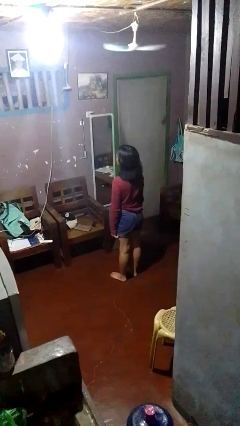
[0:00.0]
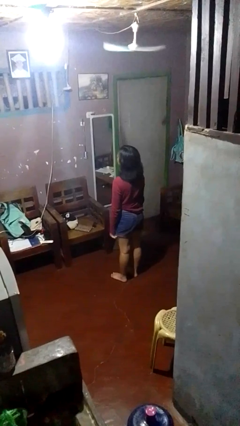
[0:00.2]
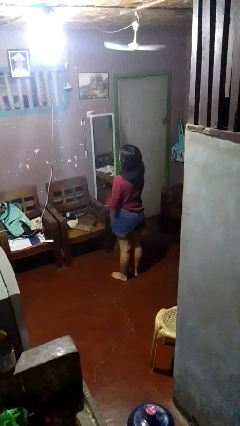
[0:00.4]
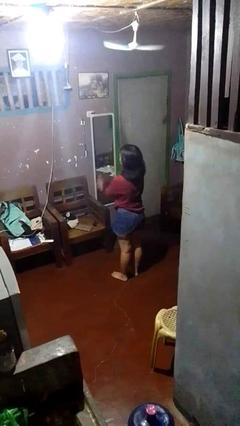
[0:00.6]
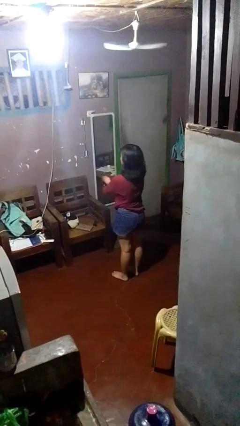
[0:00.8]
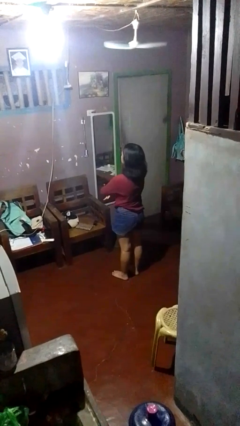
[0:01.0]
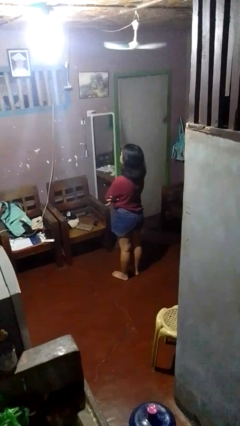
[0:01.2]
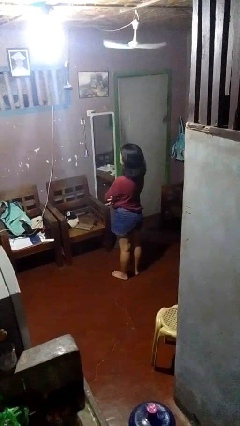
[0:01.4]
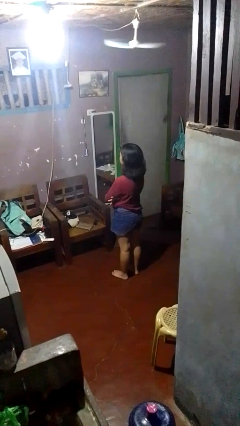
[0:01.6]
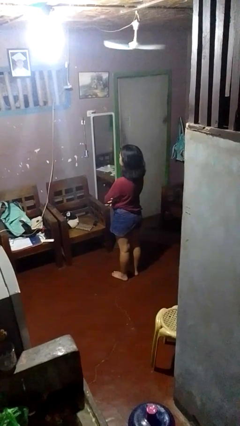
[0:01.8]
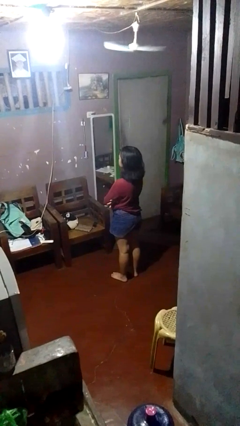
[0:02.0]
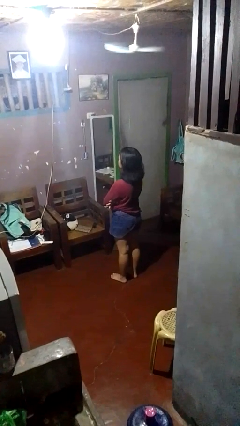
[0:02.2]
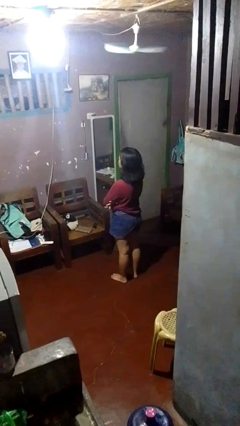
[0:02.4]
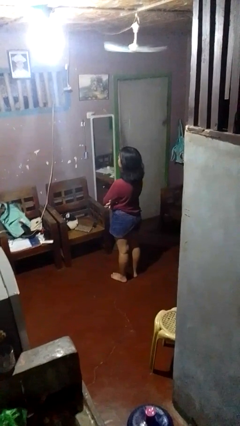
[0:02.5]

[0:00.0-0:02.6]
person crosses arms

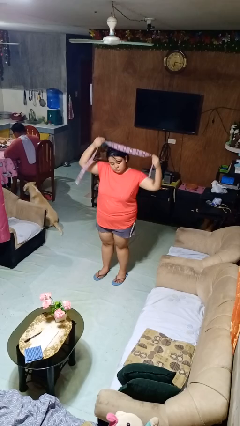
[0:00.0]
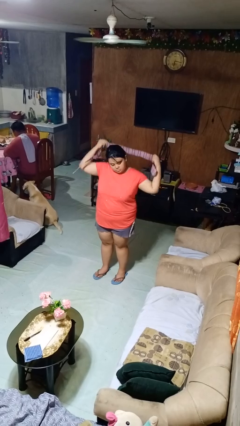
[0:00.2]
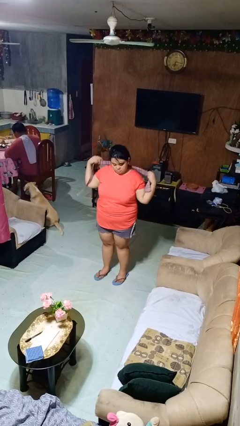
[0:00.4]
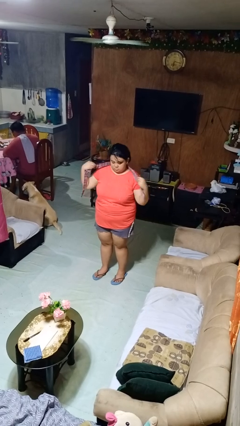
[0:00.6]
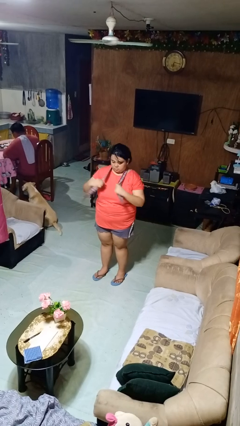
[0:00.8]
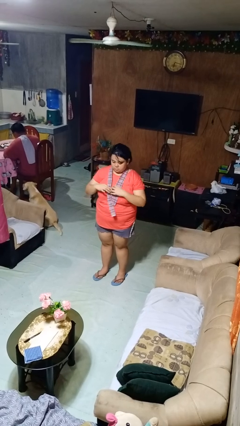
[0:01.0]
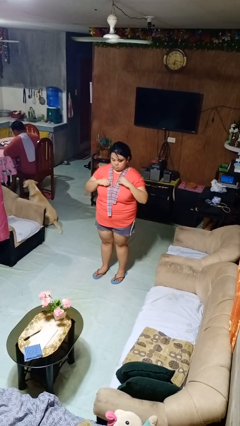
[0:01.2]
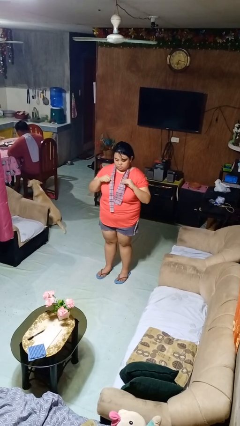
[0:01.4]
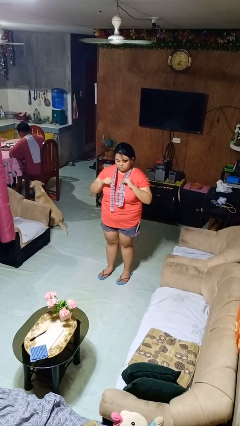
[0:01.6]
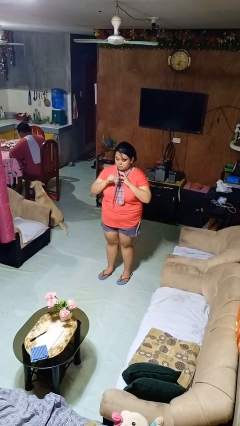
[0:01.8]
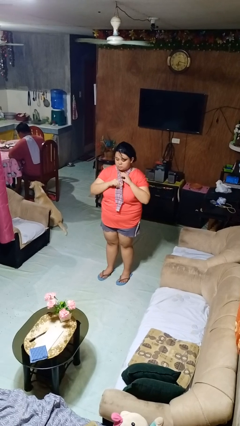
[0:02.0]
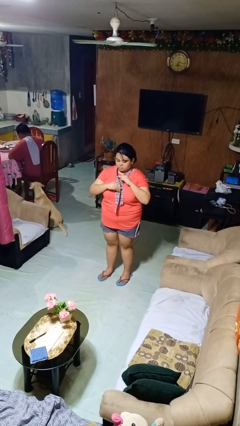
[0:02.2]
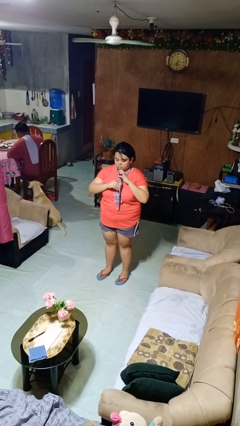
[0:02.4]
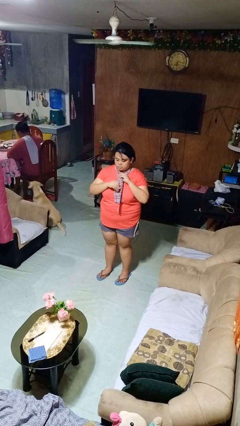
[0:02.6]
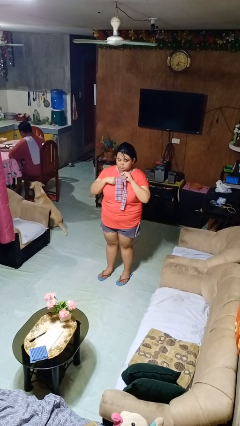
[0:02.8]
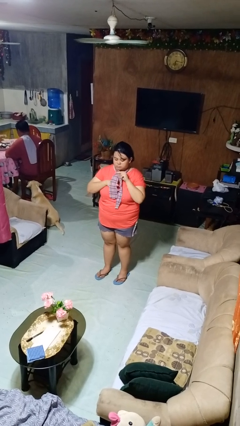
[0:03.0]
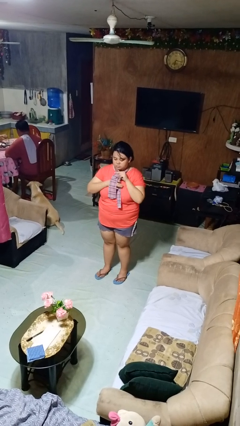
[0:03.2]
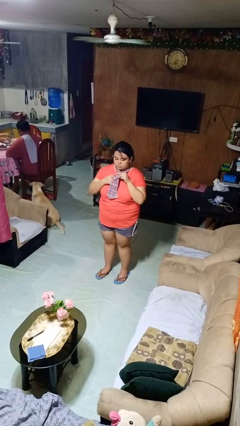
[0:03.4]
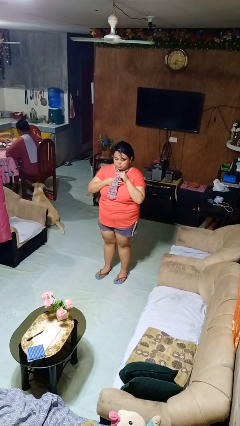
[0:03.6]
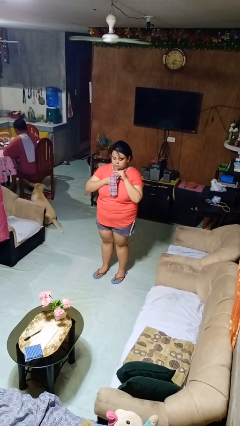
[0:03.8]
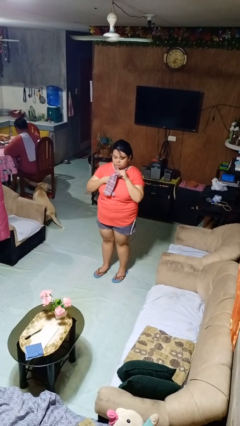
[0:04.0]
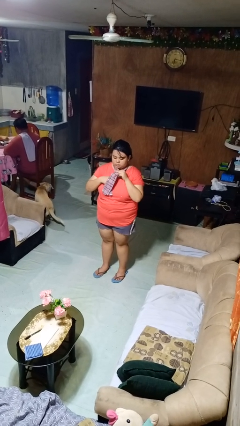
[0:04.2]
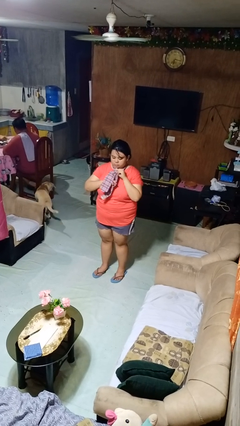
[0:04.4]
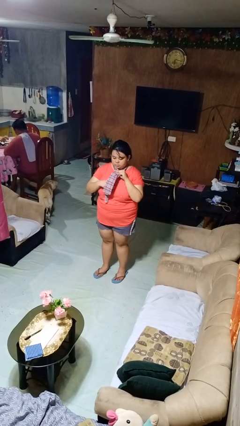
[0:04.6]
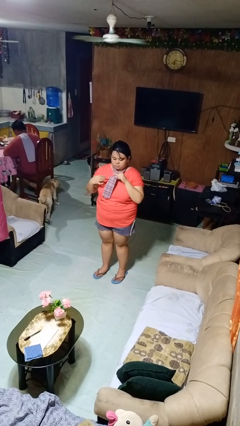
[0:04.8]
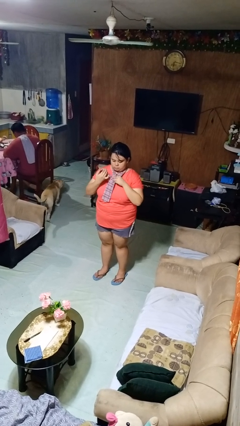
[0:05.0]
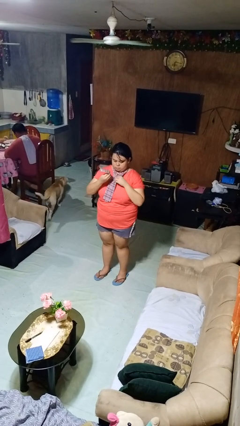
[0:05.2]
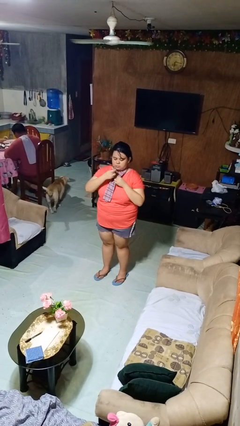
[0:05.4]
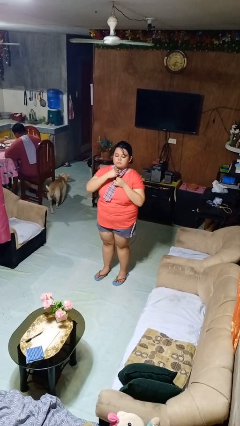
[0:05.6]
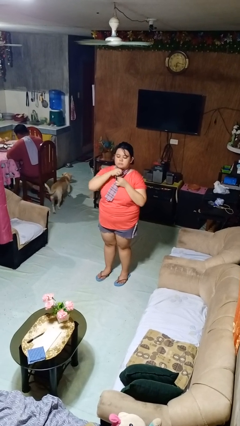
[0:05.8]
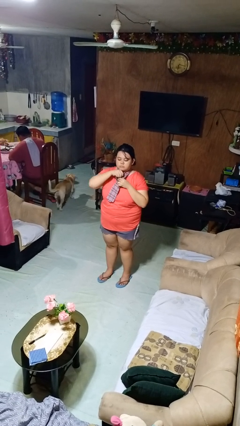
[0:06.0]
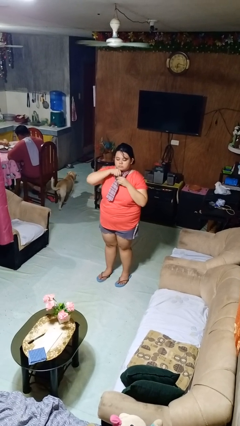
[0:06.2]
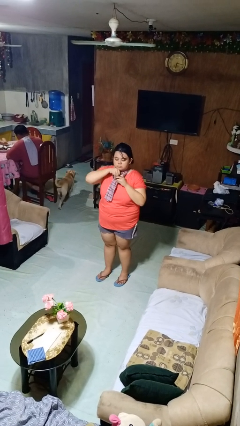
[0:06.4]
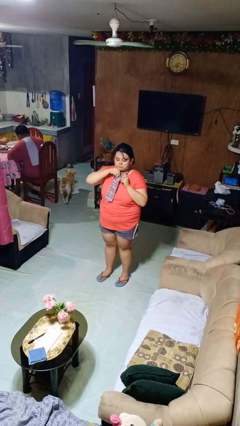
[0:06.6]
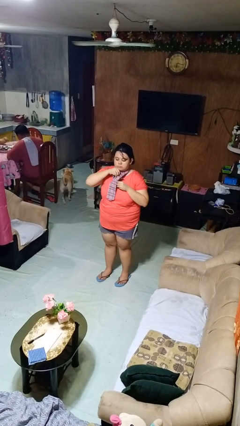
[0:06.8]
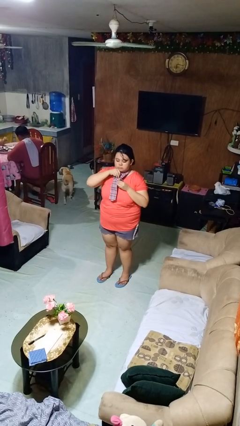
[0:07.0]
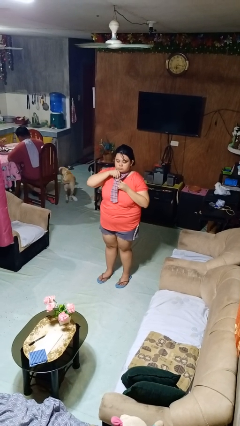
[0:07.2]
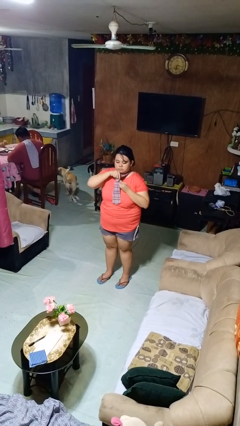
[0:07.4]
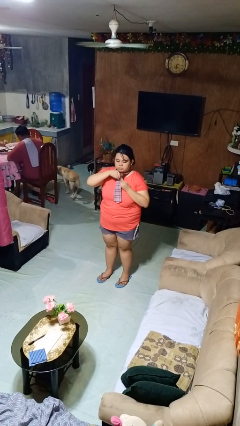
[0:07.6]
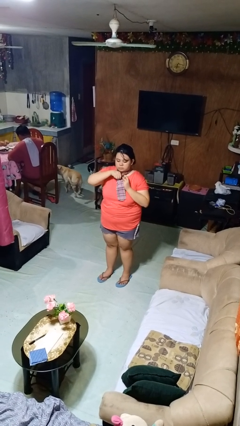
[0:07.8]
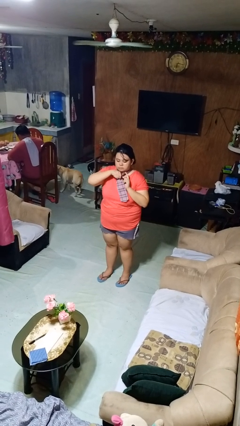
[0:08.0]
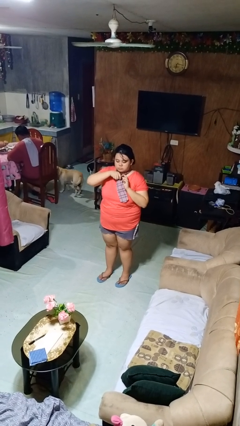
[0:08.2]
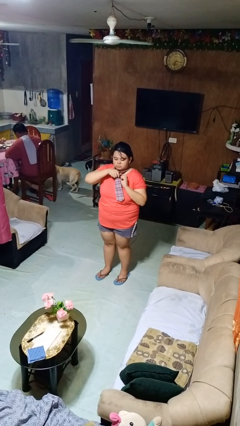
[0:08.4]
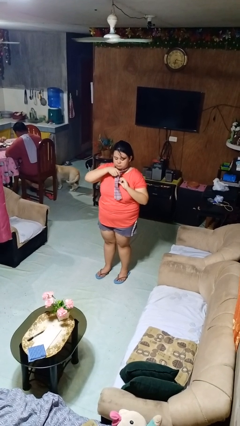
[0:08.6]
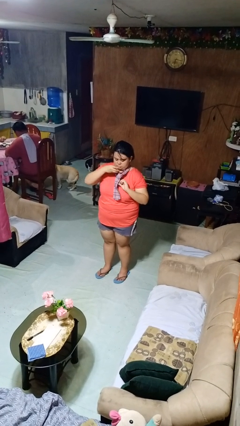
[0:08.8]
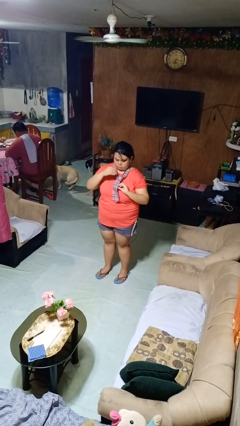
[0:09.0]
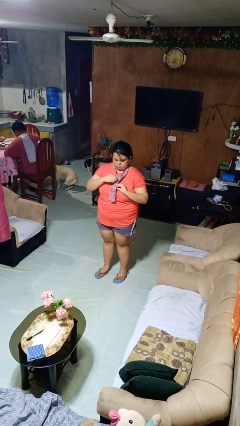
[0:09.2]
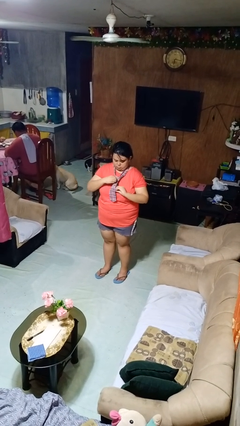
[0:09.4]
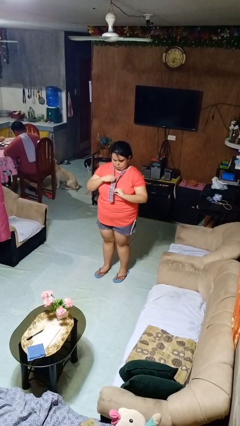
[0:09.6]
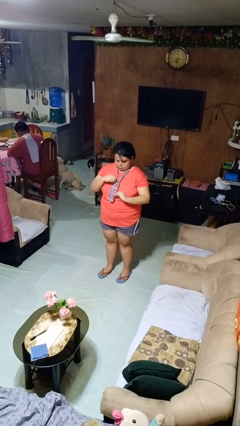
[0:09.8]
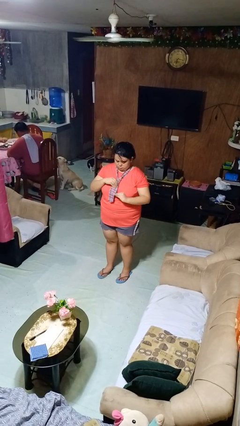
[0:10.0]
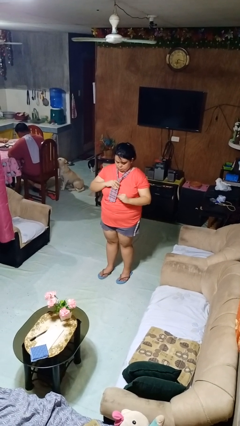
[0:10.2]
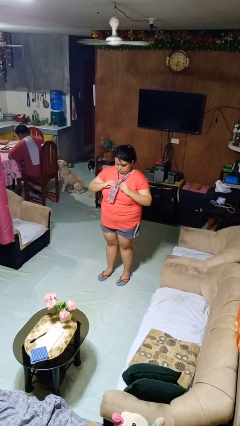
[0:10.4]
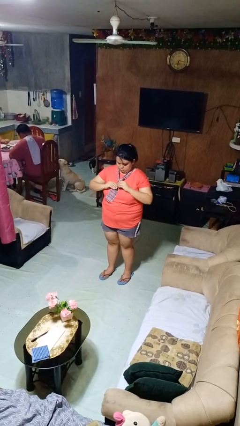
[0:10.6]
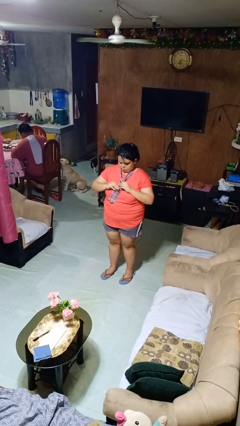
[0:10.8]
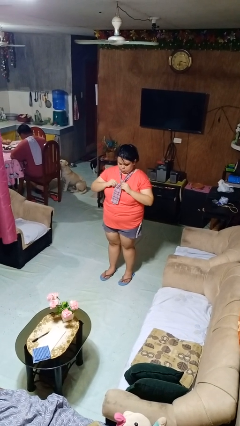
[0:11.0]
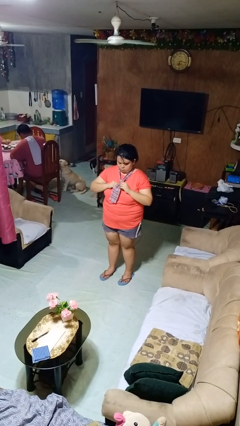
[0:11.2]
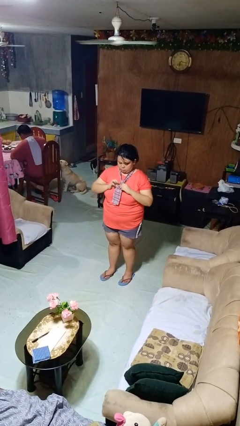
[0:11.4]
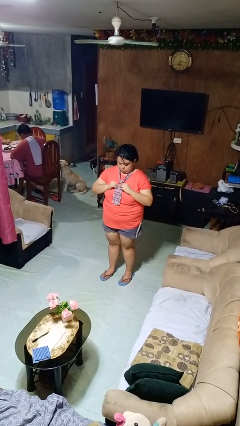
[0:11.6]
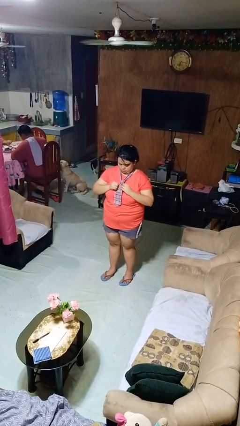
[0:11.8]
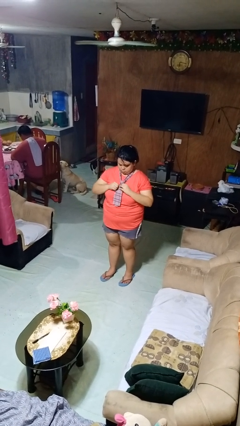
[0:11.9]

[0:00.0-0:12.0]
person puts on necktie

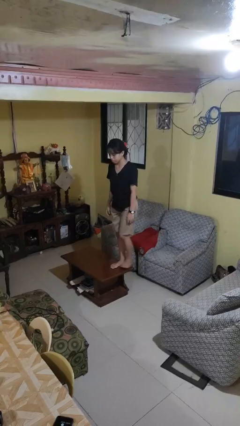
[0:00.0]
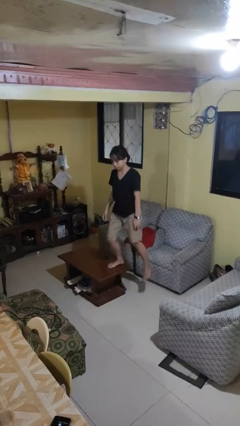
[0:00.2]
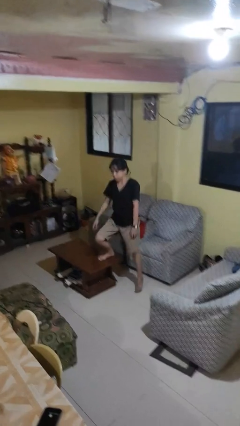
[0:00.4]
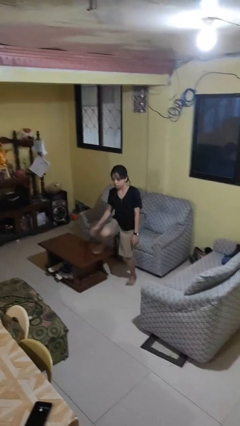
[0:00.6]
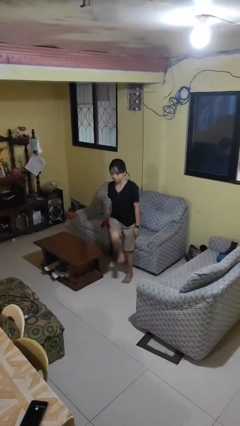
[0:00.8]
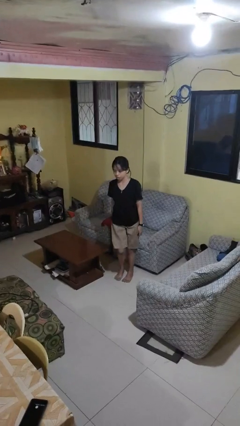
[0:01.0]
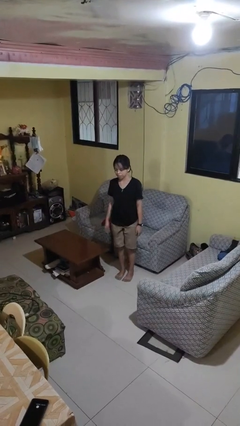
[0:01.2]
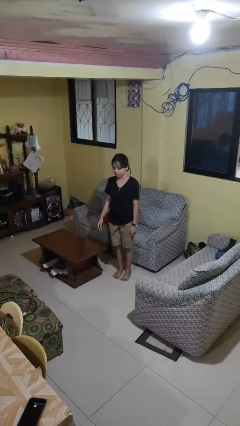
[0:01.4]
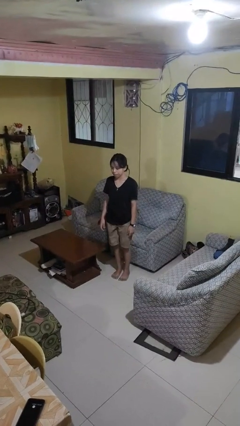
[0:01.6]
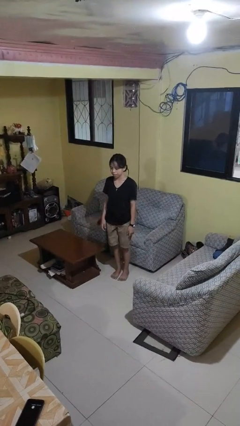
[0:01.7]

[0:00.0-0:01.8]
person climbs off table

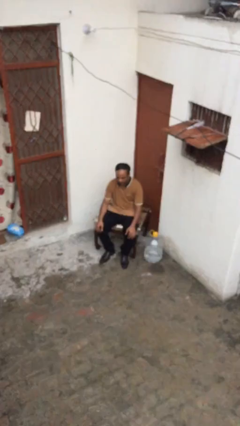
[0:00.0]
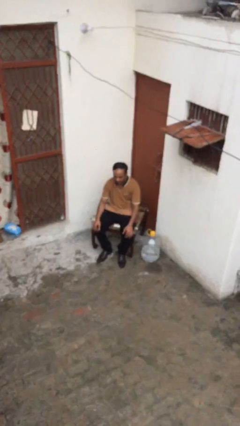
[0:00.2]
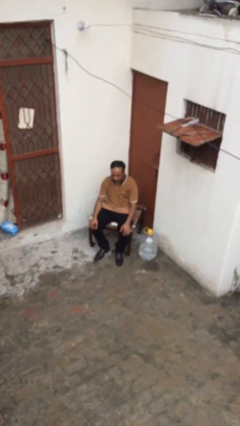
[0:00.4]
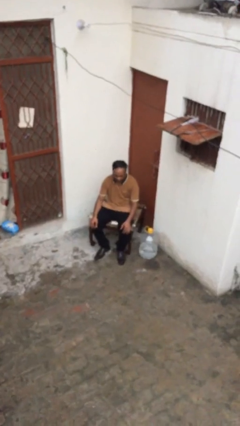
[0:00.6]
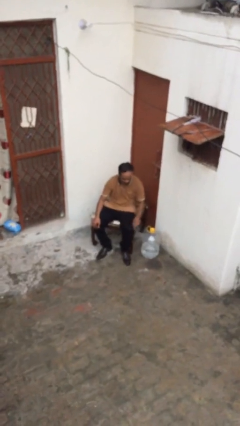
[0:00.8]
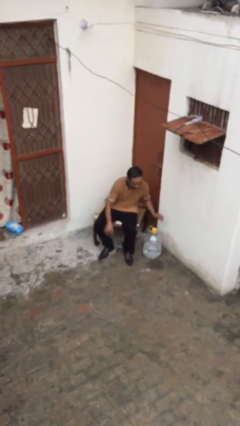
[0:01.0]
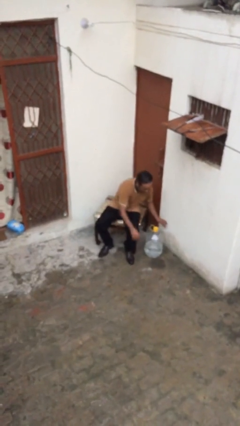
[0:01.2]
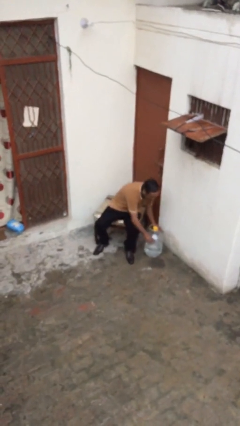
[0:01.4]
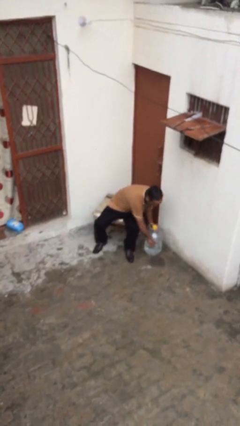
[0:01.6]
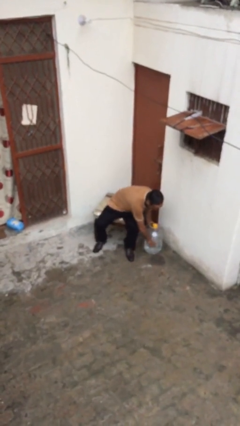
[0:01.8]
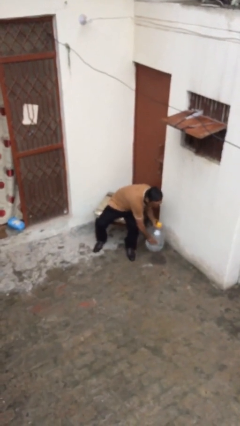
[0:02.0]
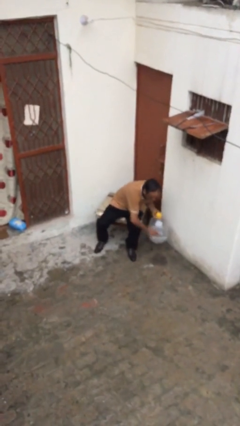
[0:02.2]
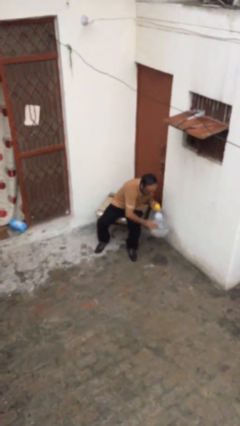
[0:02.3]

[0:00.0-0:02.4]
person picks up object from floor
